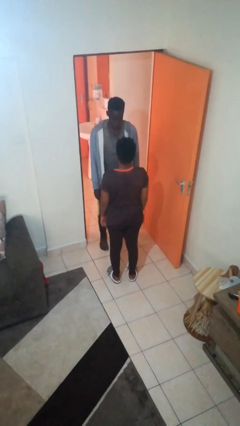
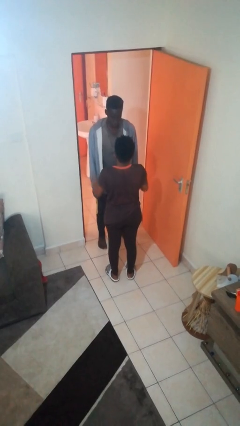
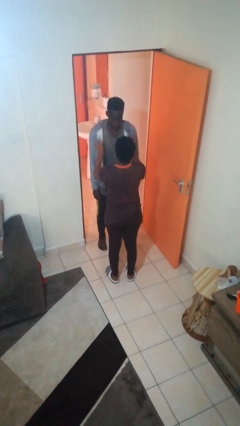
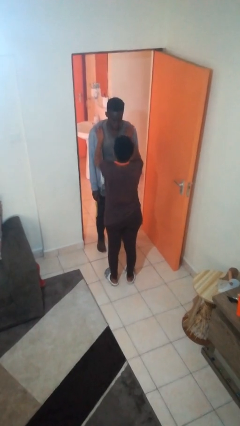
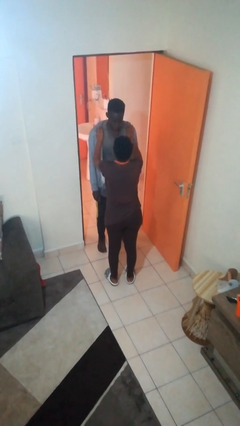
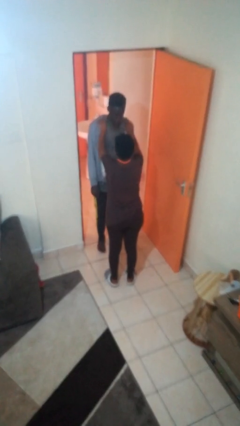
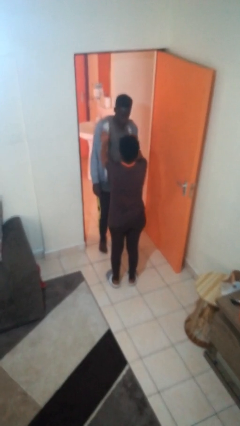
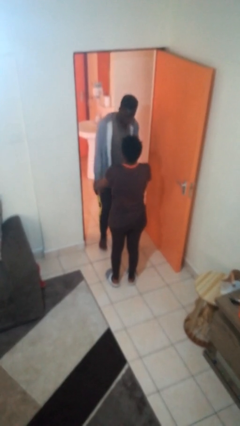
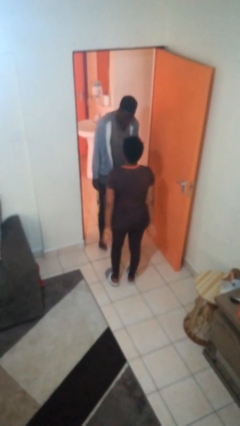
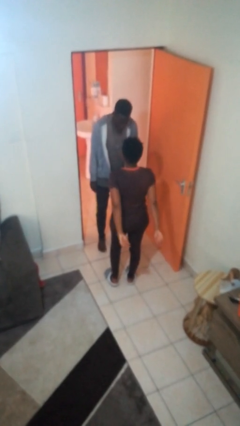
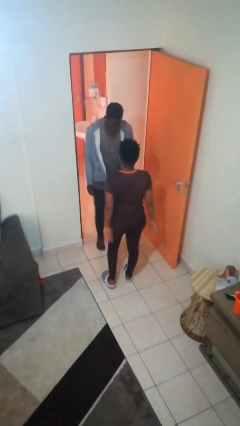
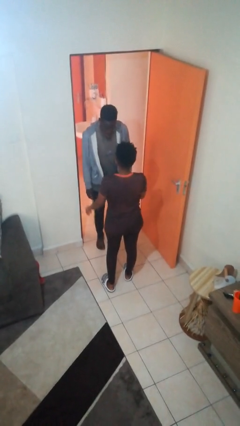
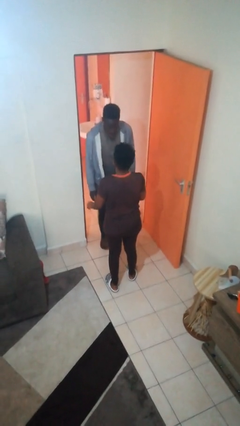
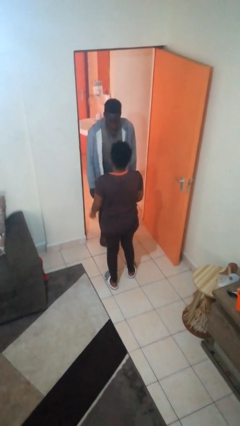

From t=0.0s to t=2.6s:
person shoves person

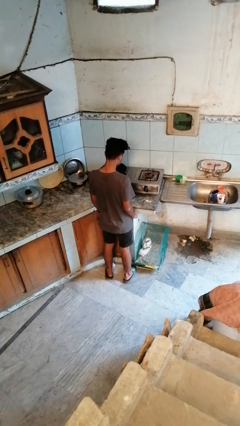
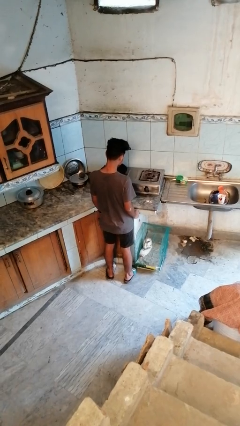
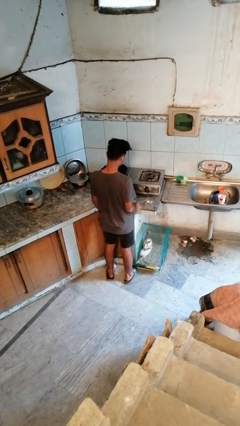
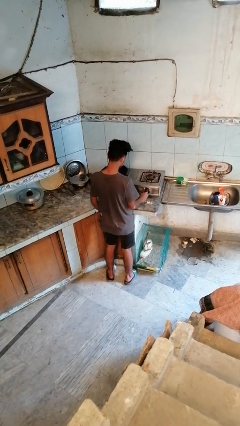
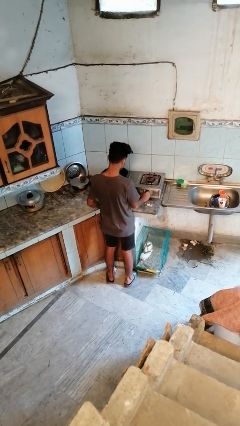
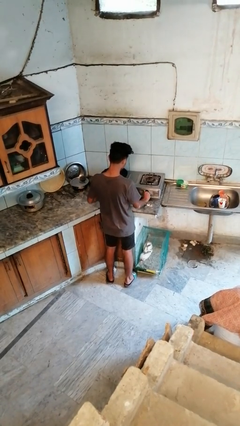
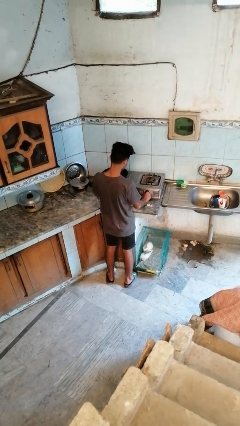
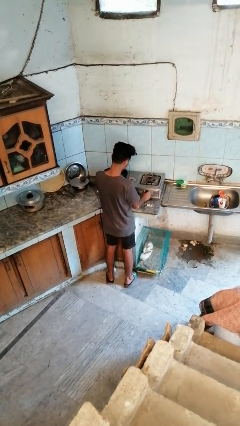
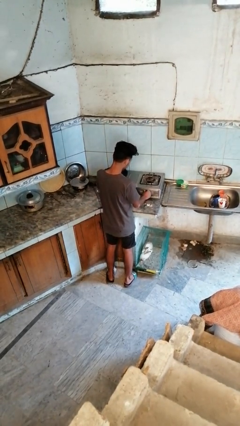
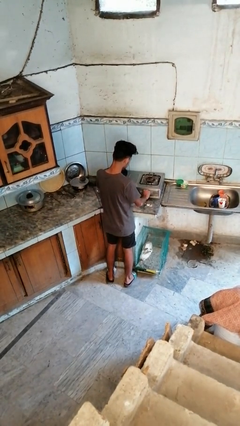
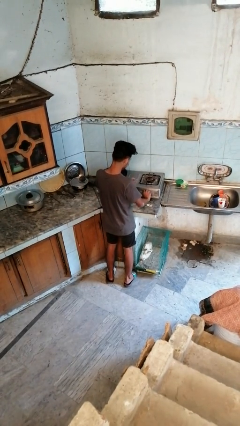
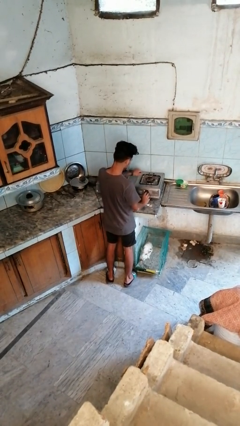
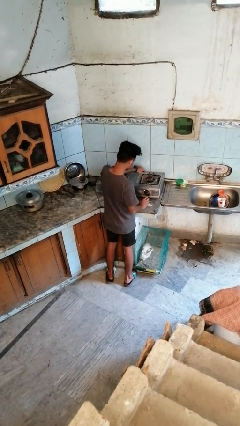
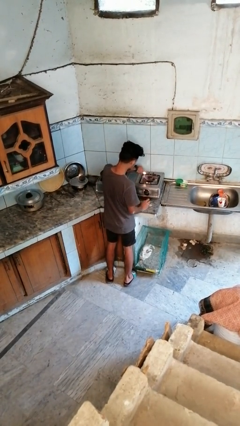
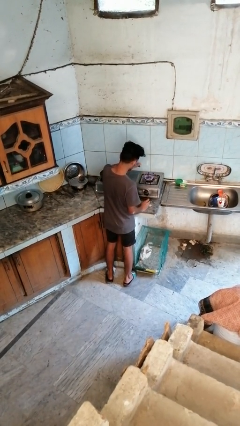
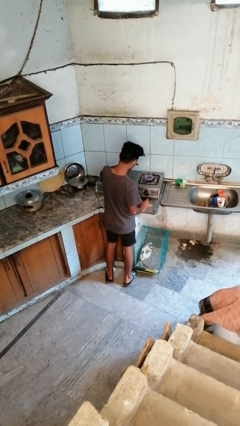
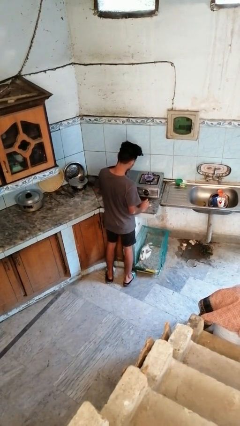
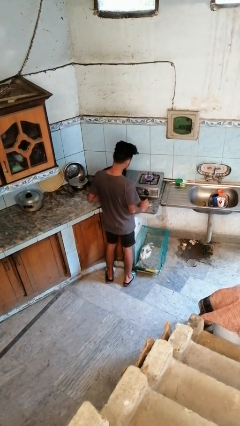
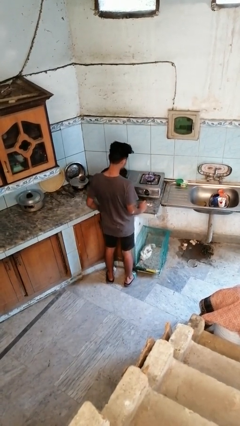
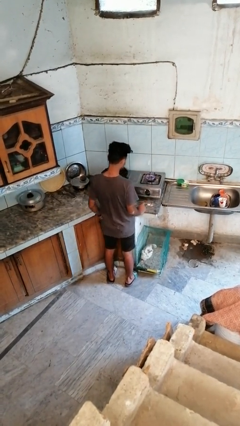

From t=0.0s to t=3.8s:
person turns on stovetop

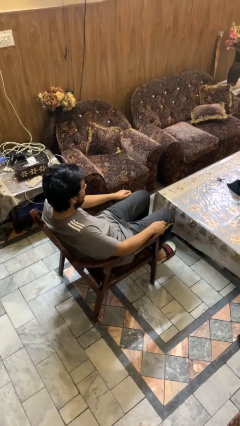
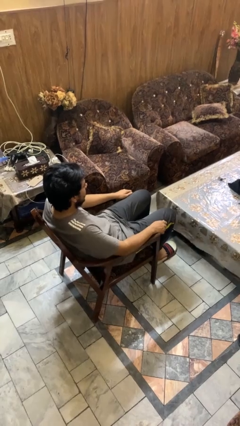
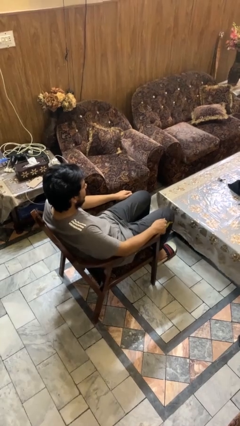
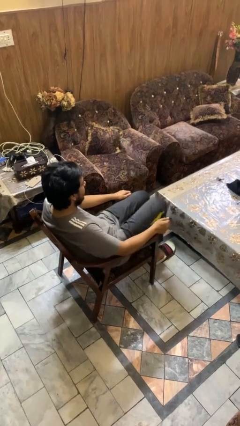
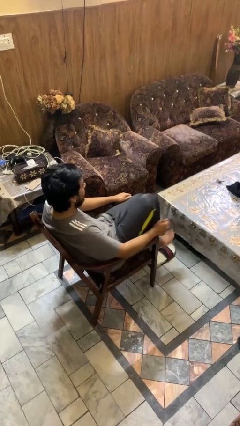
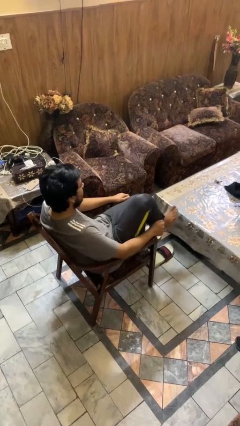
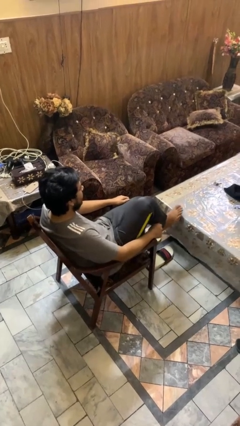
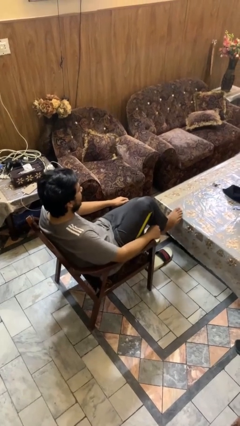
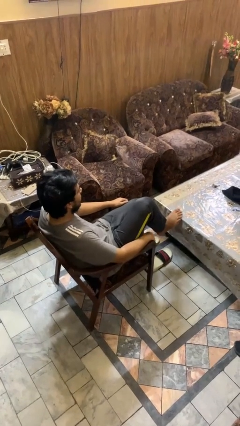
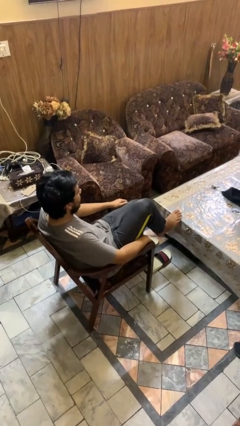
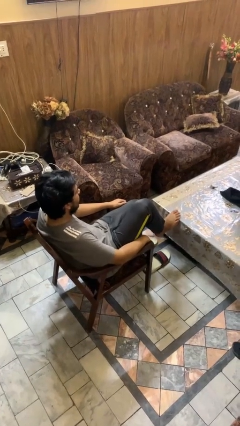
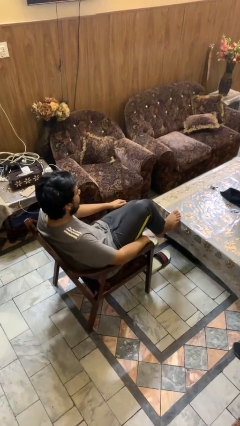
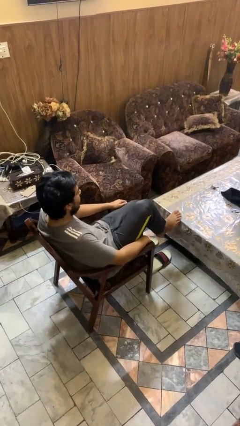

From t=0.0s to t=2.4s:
person puts feet up

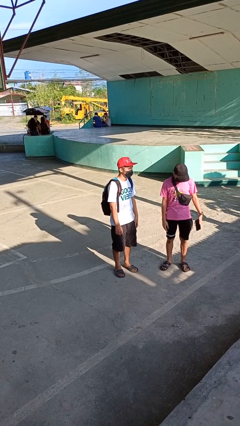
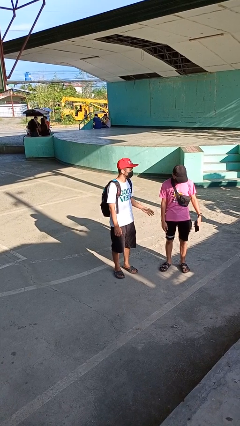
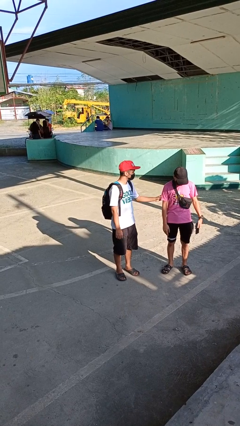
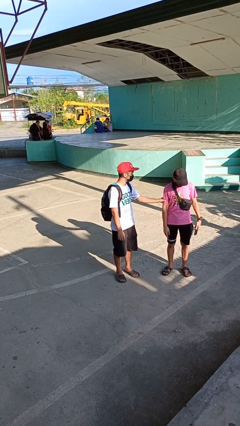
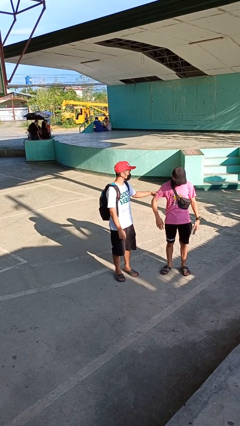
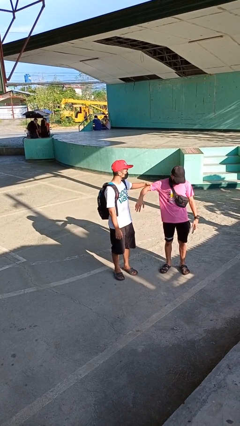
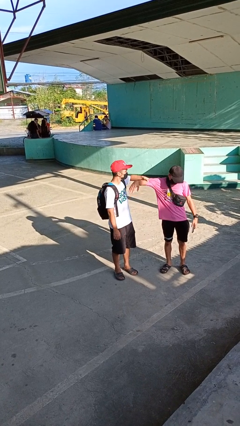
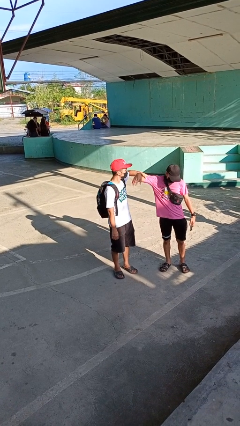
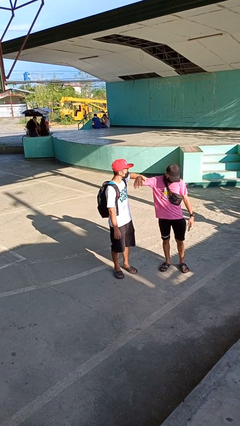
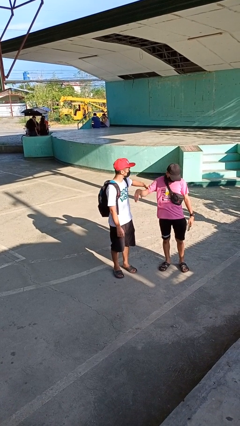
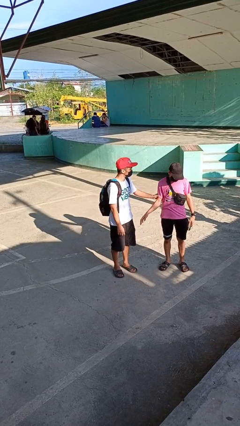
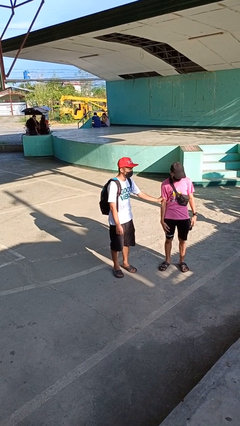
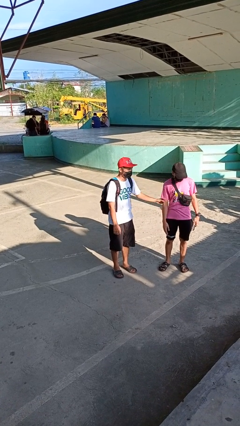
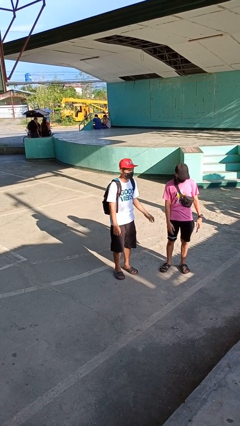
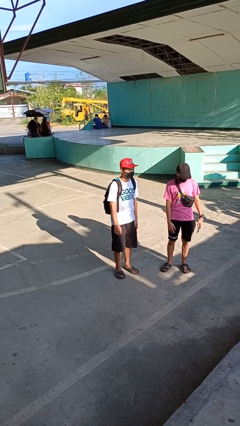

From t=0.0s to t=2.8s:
person grabs person by bicep

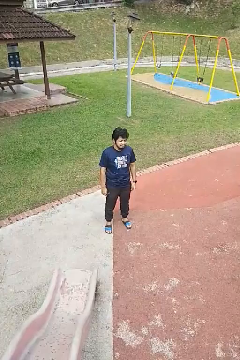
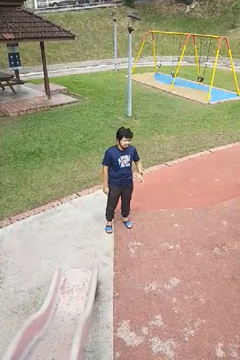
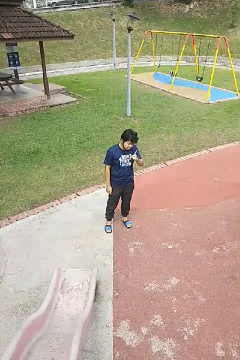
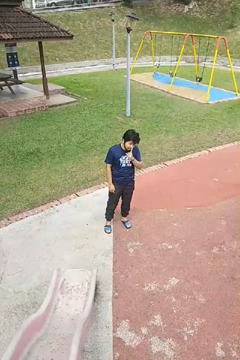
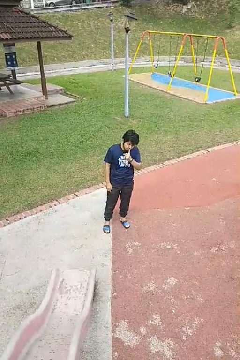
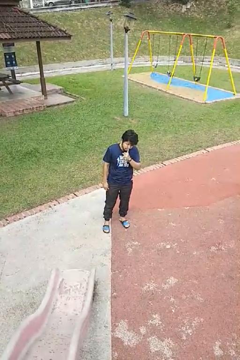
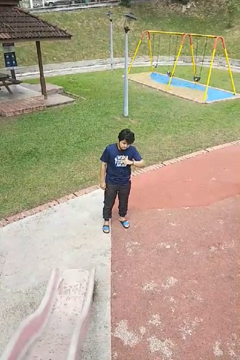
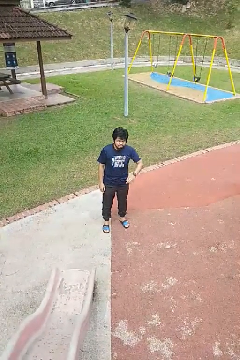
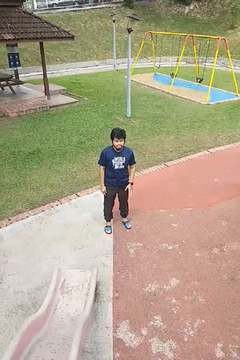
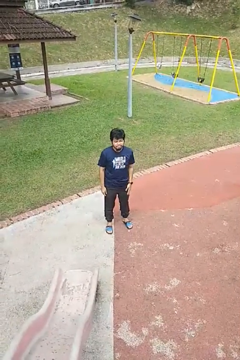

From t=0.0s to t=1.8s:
person gestures be quiet

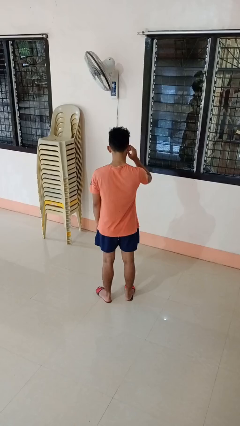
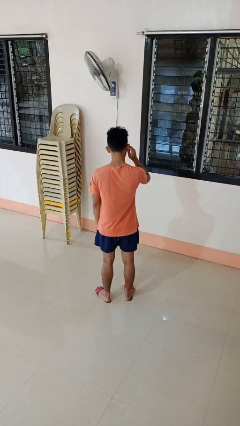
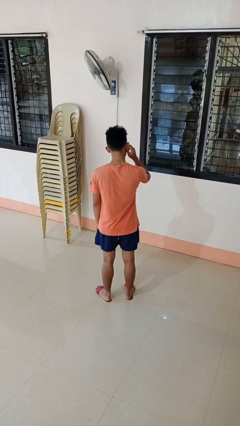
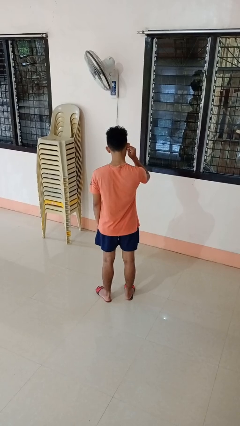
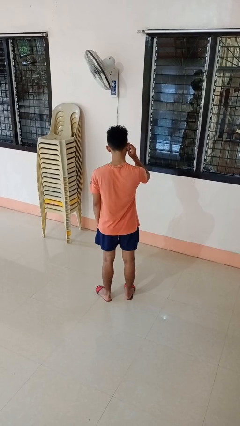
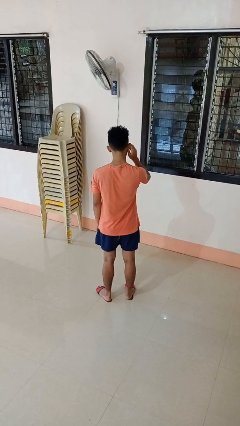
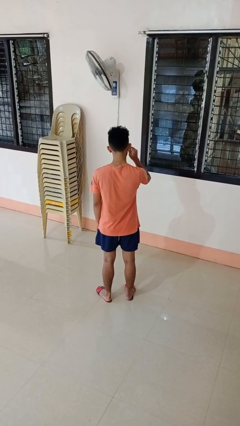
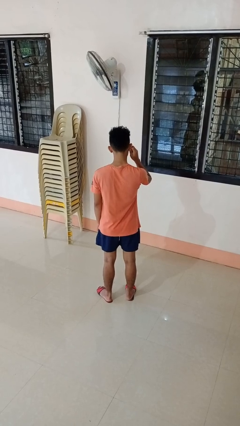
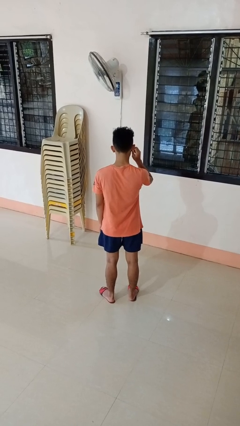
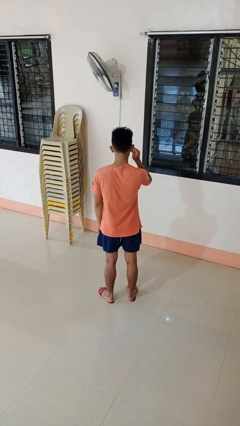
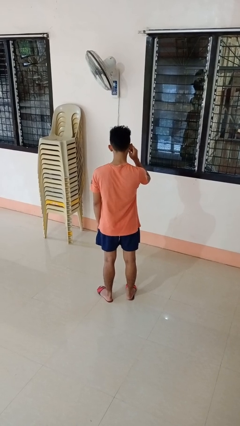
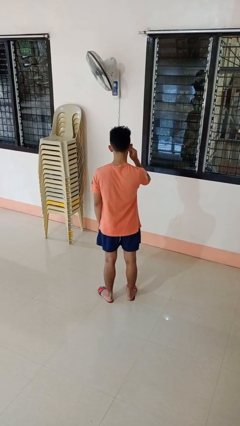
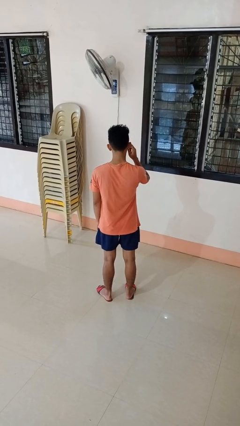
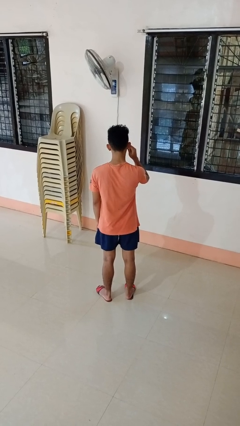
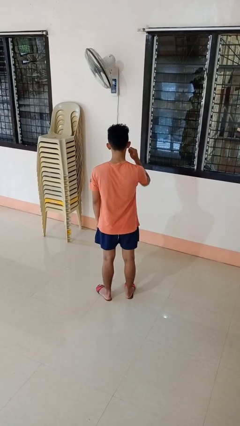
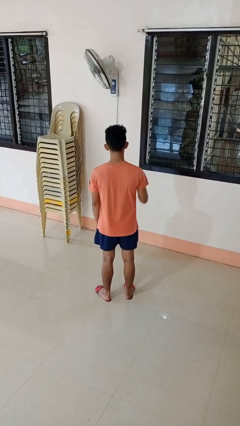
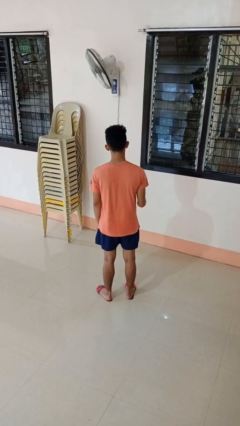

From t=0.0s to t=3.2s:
person touches earlobe

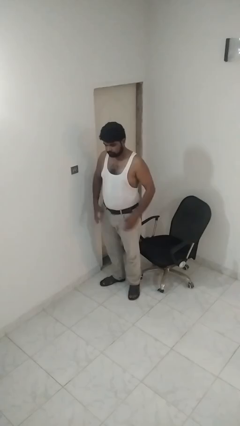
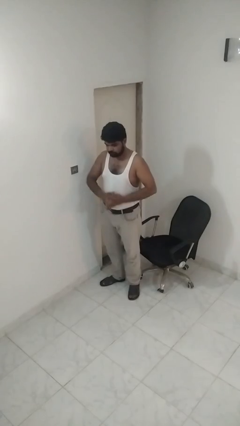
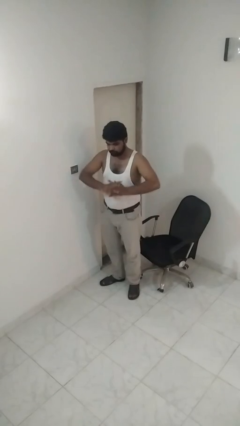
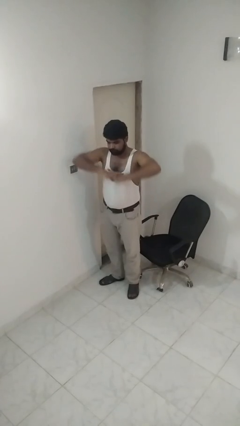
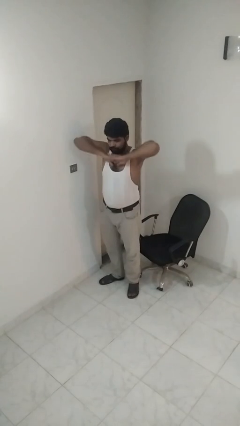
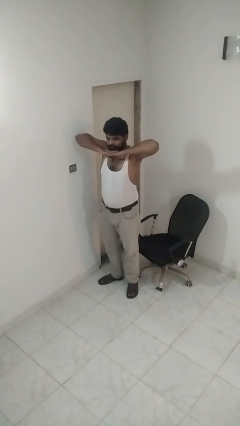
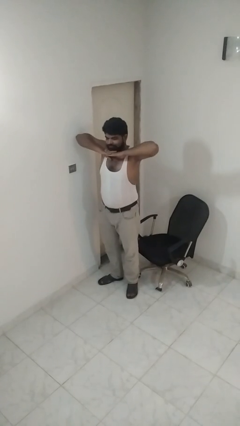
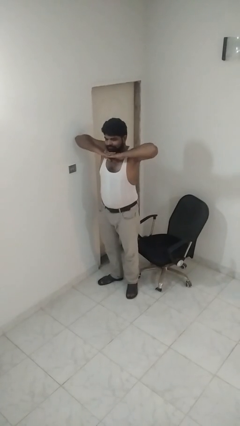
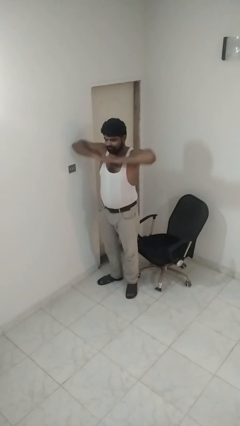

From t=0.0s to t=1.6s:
person cracks knuckles
